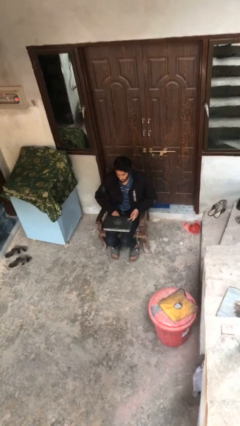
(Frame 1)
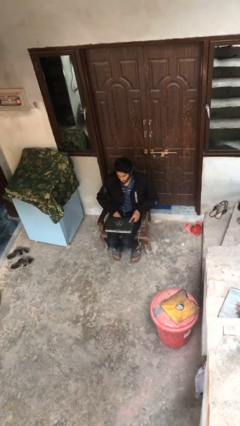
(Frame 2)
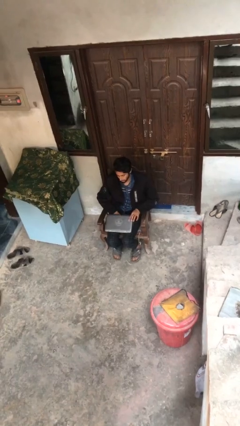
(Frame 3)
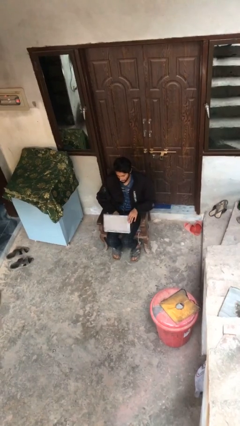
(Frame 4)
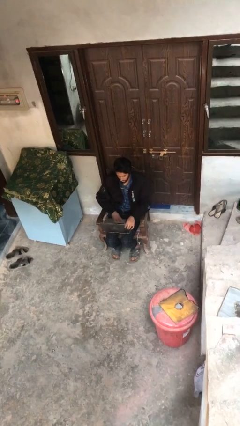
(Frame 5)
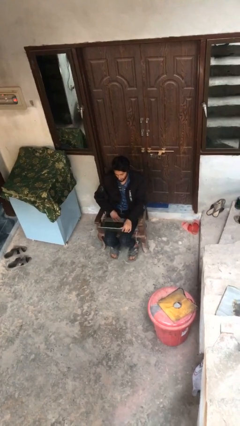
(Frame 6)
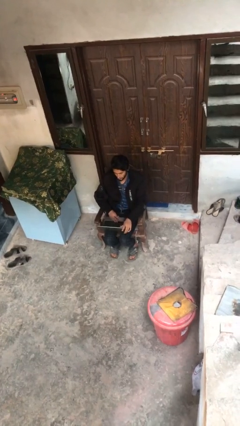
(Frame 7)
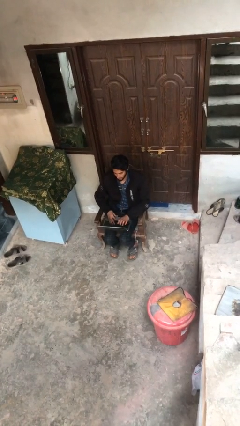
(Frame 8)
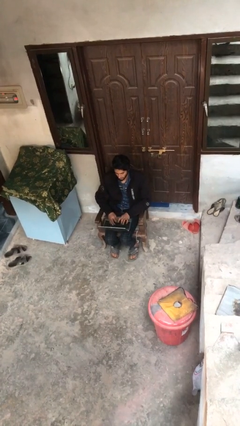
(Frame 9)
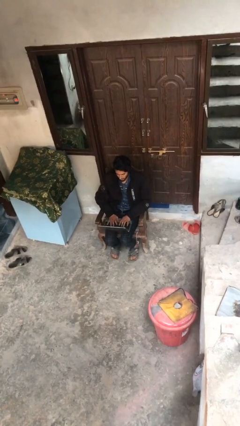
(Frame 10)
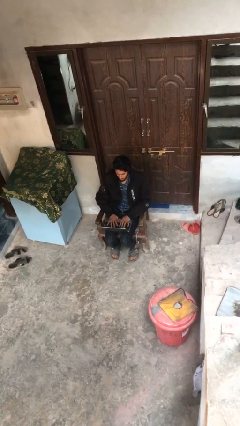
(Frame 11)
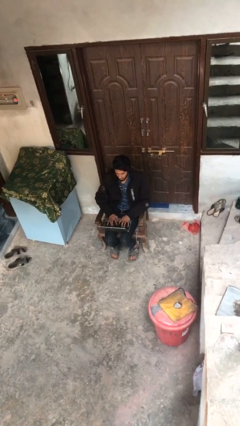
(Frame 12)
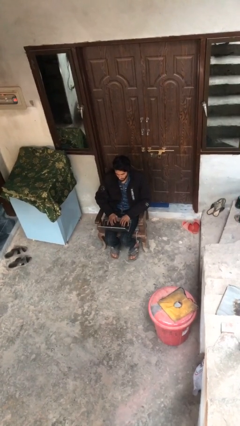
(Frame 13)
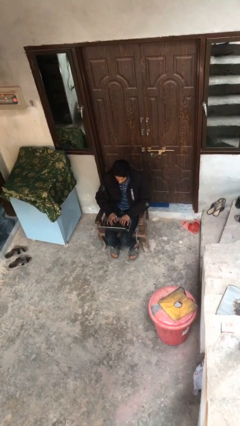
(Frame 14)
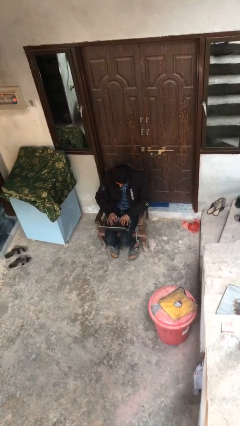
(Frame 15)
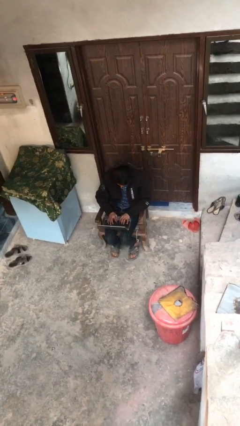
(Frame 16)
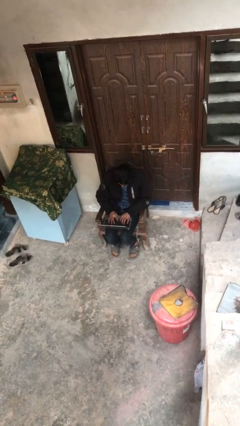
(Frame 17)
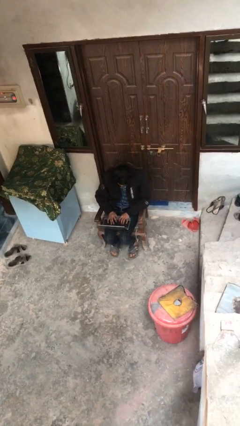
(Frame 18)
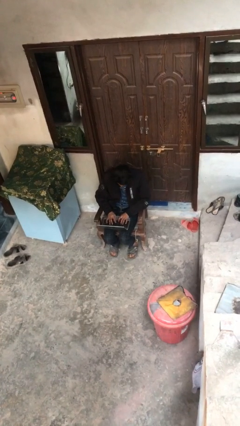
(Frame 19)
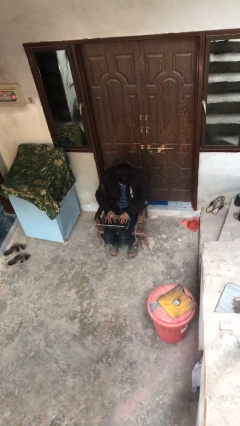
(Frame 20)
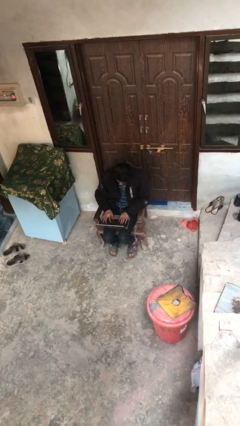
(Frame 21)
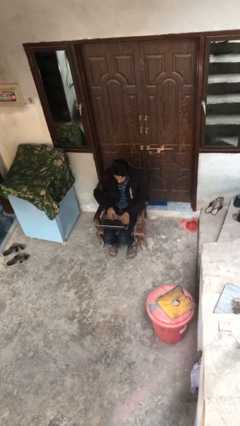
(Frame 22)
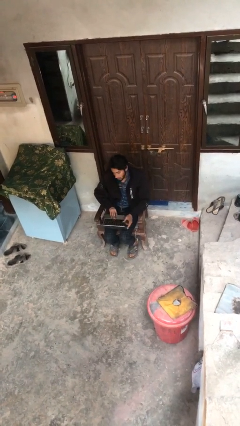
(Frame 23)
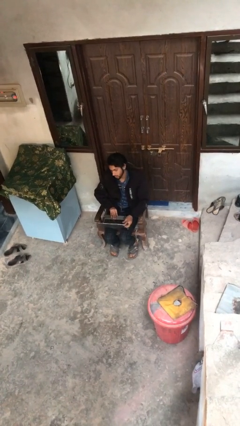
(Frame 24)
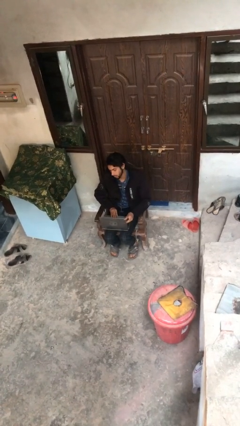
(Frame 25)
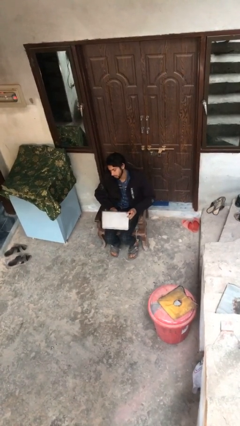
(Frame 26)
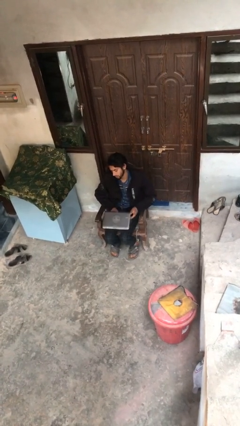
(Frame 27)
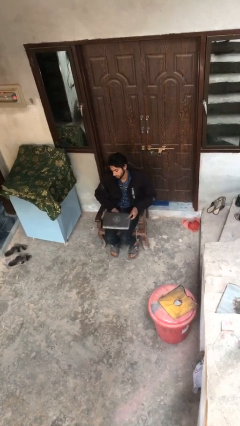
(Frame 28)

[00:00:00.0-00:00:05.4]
person interacts with laptop

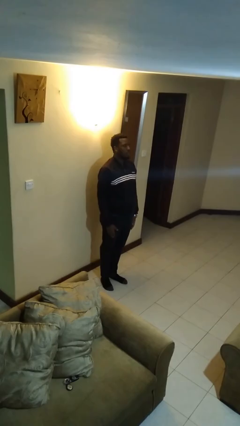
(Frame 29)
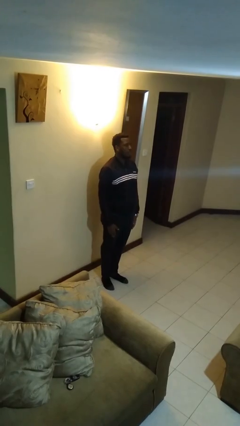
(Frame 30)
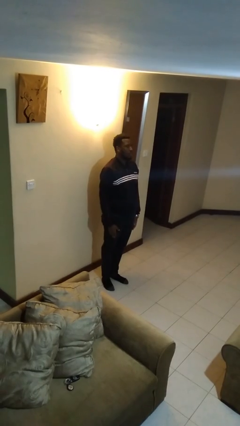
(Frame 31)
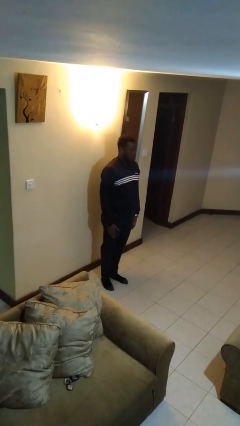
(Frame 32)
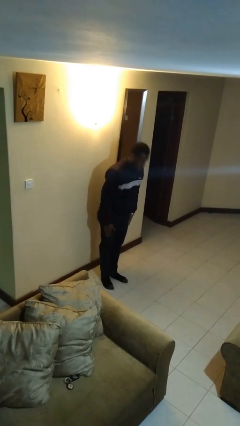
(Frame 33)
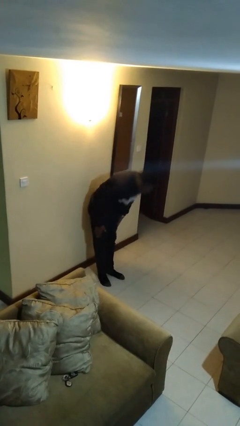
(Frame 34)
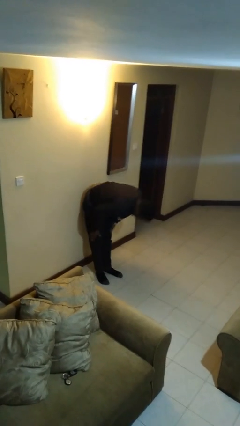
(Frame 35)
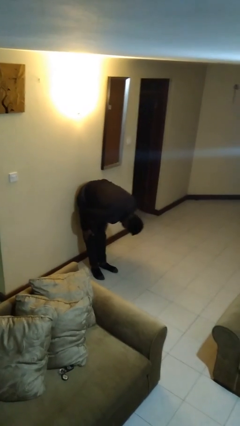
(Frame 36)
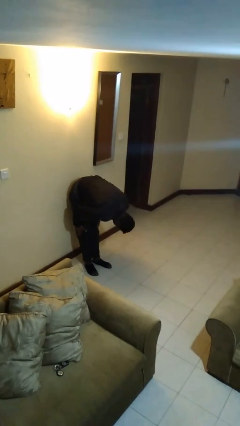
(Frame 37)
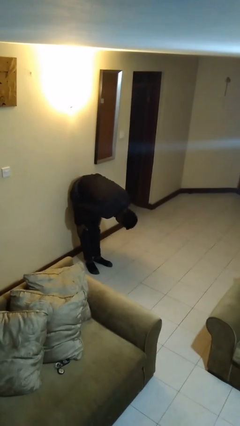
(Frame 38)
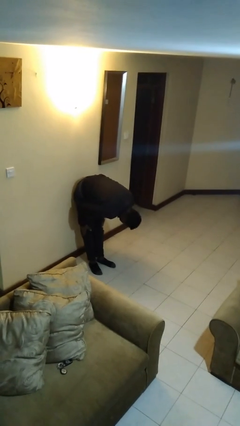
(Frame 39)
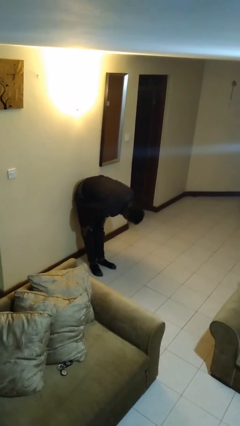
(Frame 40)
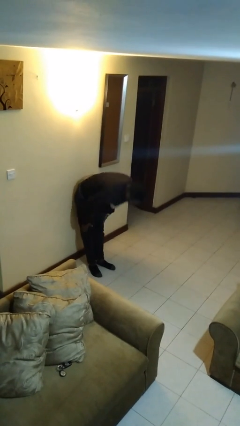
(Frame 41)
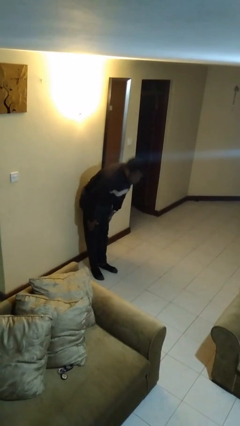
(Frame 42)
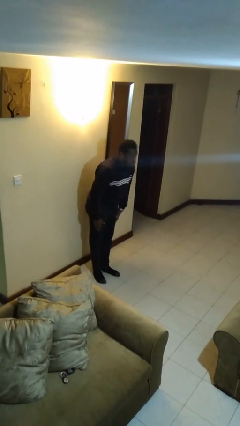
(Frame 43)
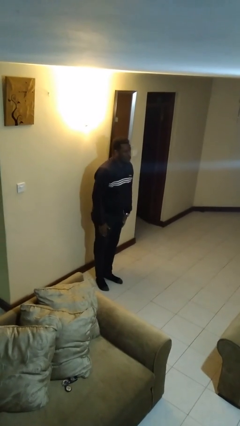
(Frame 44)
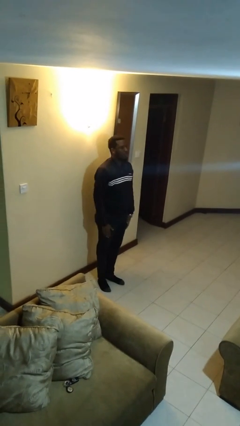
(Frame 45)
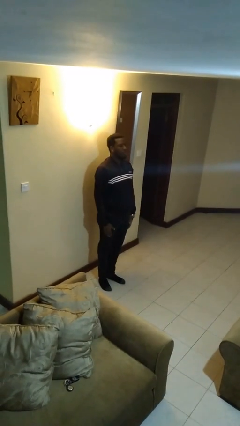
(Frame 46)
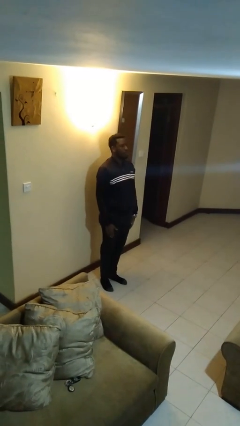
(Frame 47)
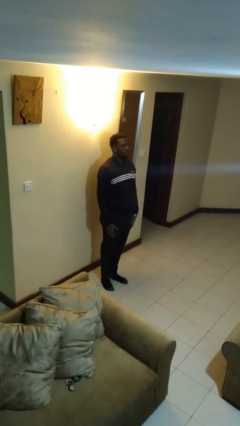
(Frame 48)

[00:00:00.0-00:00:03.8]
person bows

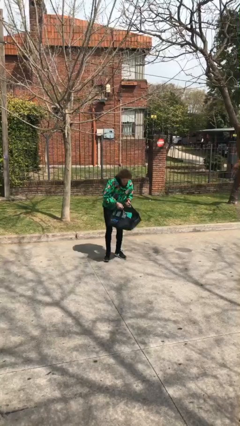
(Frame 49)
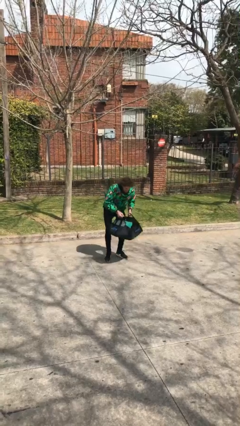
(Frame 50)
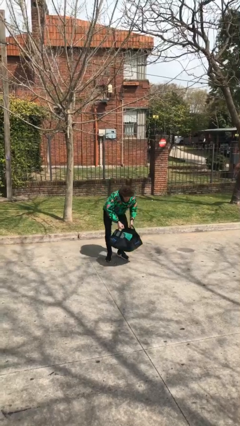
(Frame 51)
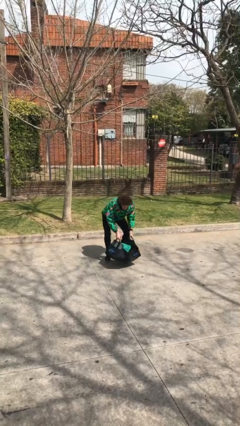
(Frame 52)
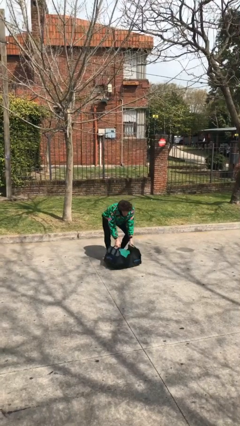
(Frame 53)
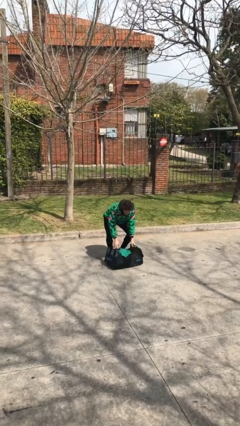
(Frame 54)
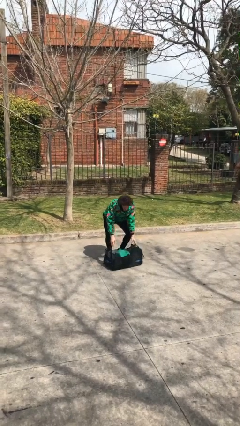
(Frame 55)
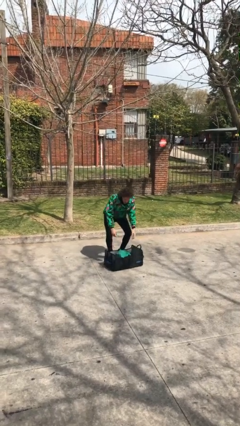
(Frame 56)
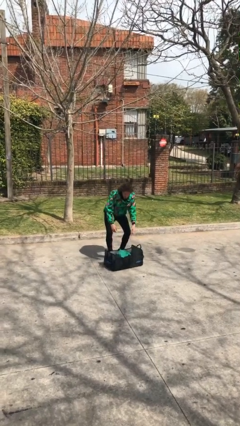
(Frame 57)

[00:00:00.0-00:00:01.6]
person puts down object on floor

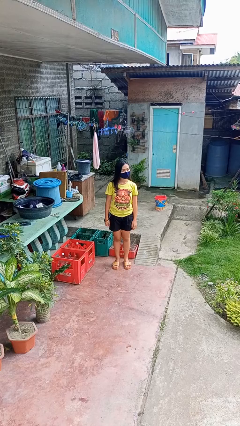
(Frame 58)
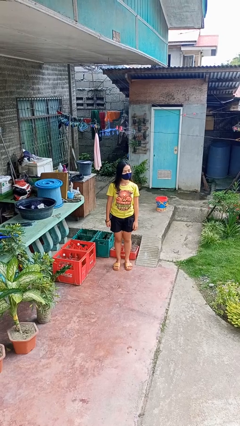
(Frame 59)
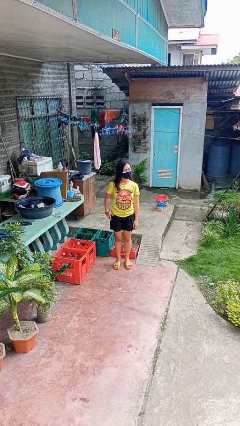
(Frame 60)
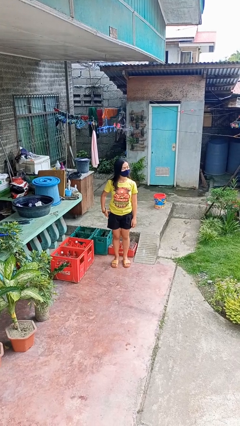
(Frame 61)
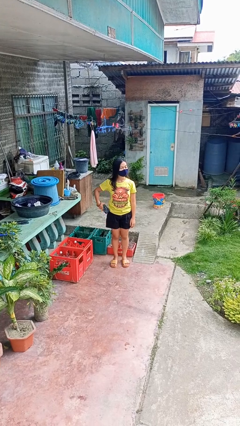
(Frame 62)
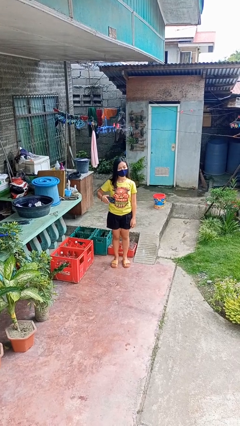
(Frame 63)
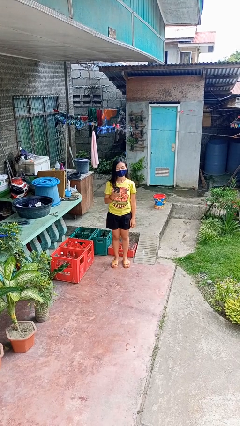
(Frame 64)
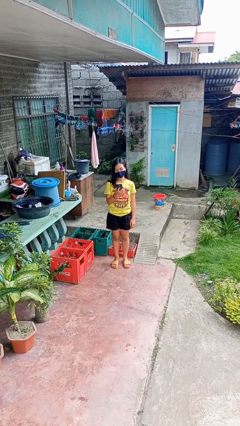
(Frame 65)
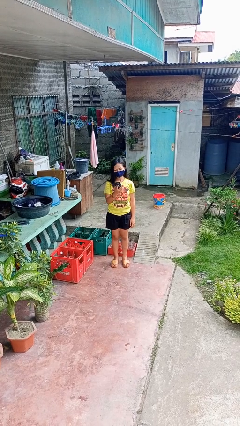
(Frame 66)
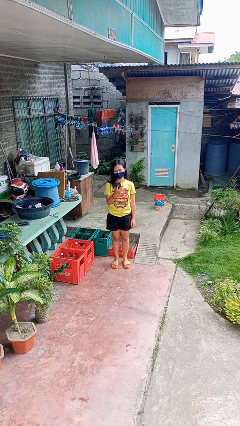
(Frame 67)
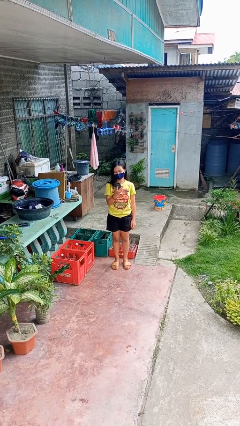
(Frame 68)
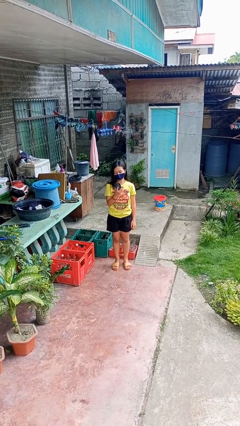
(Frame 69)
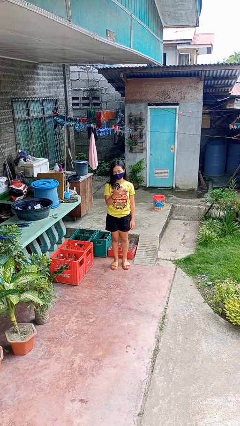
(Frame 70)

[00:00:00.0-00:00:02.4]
person takes phone from pocket

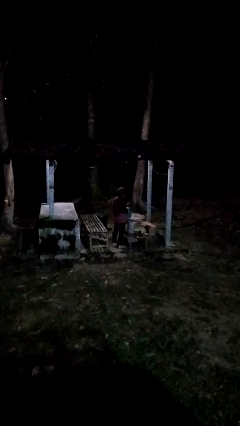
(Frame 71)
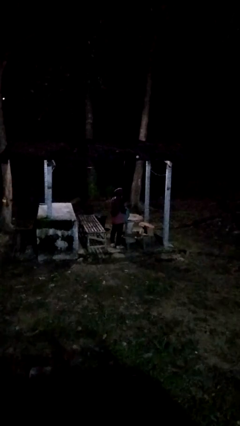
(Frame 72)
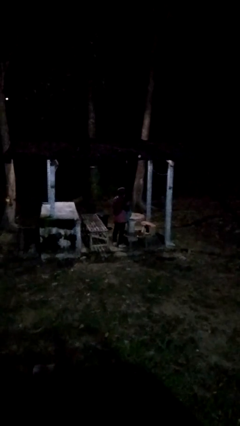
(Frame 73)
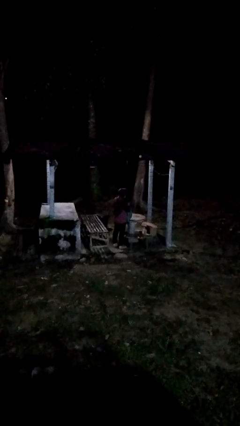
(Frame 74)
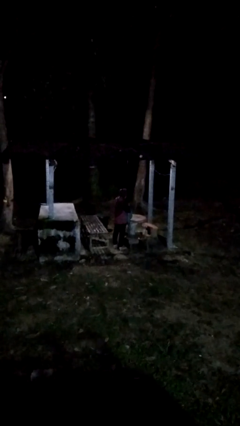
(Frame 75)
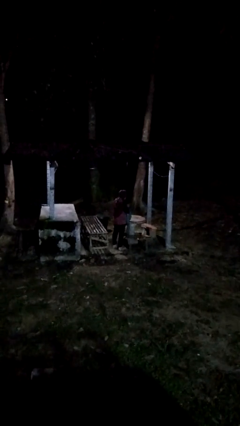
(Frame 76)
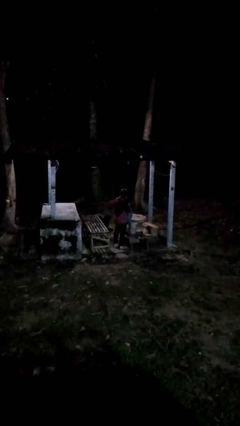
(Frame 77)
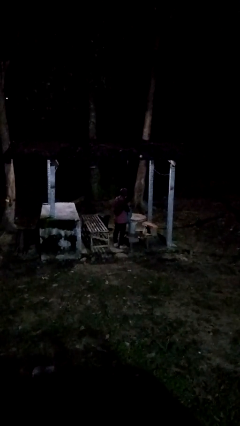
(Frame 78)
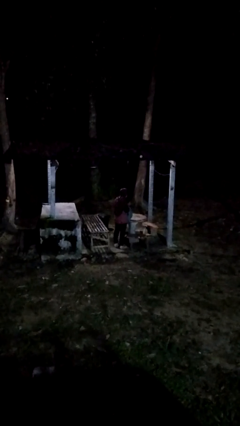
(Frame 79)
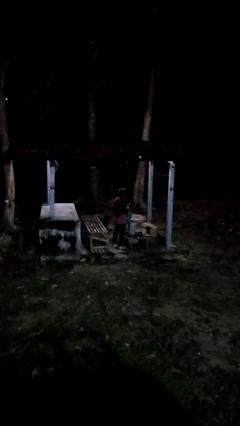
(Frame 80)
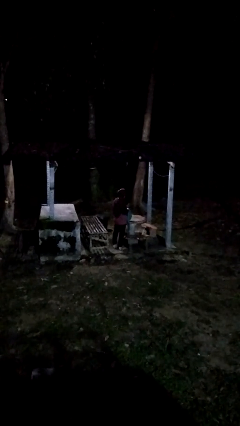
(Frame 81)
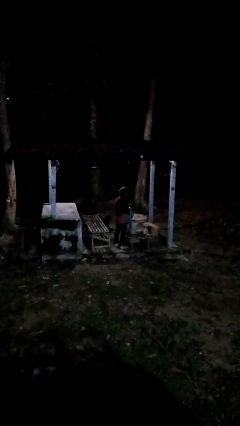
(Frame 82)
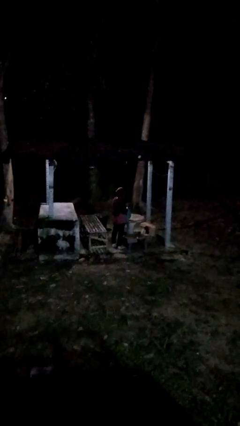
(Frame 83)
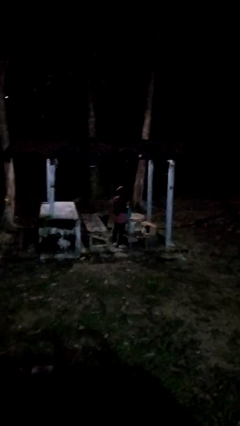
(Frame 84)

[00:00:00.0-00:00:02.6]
person searches in bag

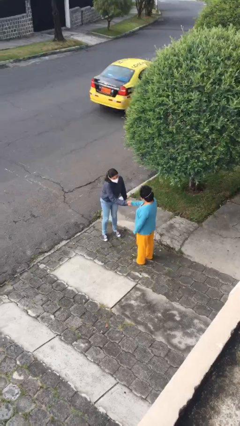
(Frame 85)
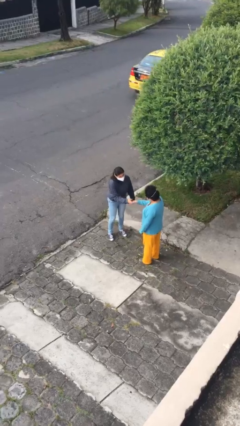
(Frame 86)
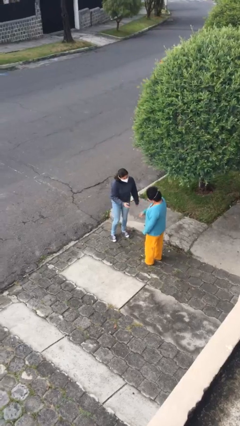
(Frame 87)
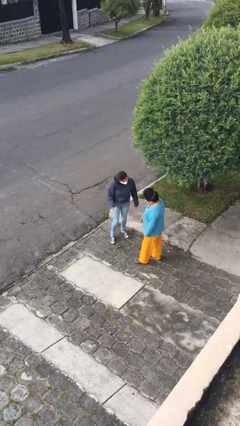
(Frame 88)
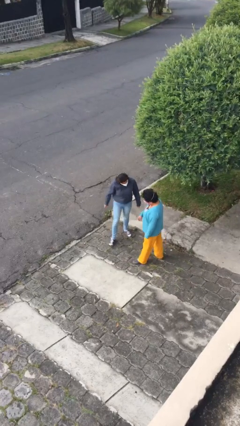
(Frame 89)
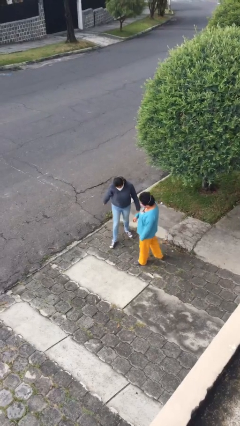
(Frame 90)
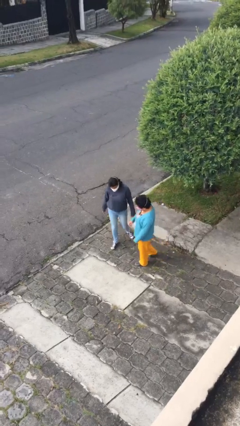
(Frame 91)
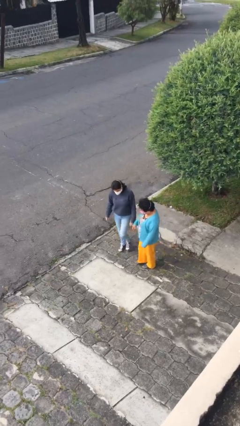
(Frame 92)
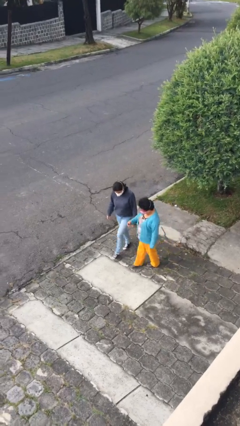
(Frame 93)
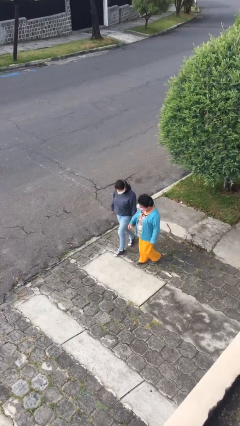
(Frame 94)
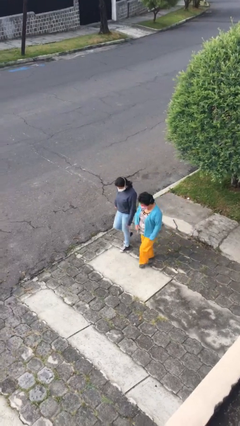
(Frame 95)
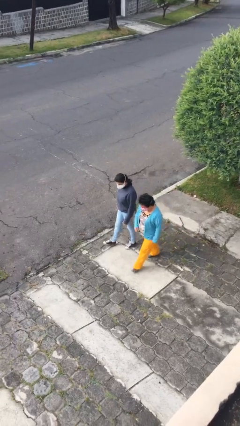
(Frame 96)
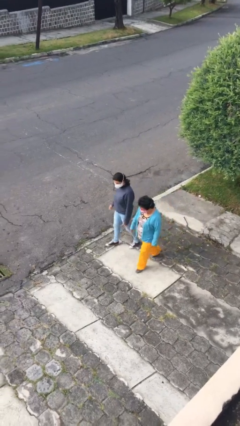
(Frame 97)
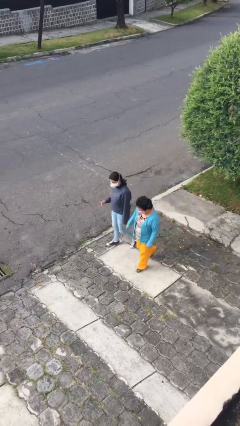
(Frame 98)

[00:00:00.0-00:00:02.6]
person talks to person
